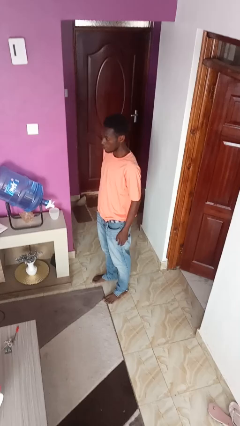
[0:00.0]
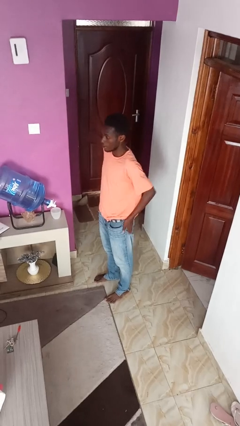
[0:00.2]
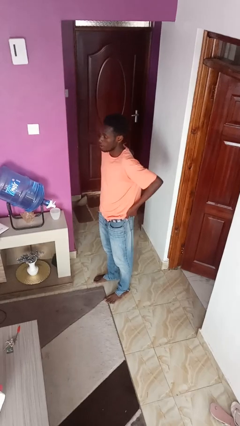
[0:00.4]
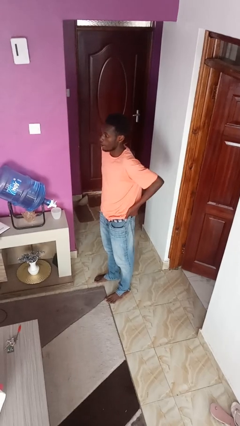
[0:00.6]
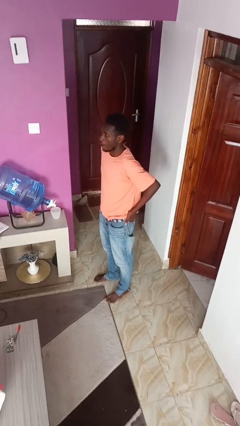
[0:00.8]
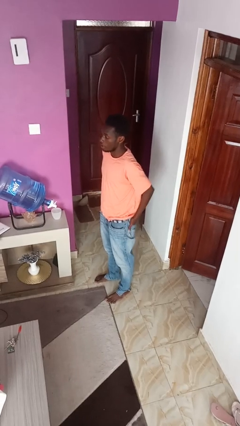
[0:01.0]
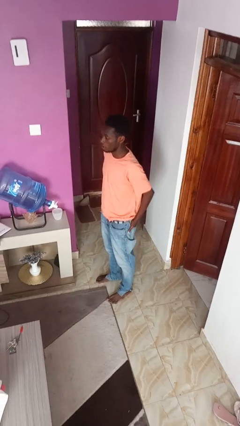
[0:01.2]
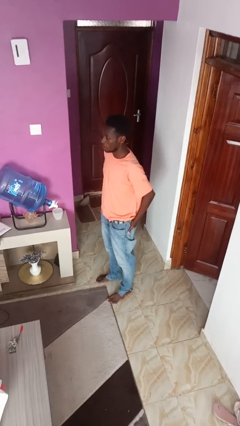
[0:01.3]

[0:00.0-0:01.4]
person puts hands in back pockets

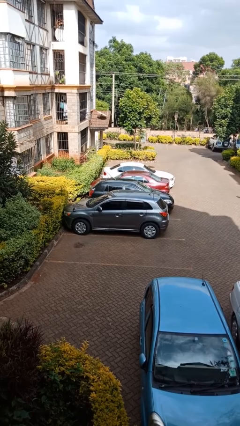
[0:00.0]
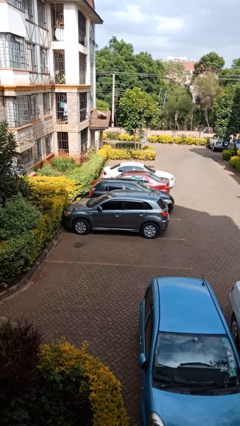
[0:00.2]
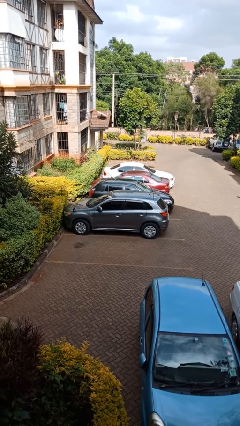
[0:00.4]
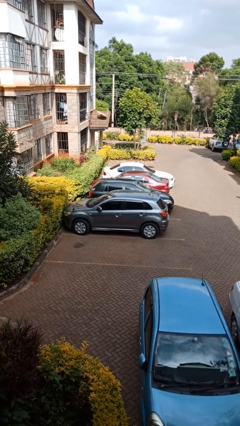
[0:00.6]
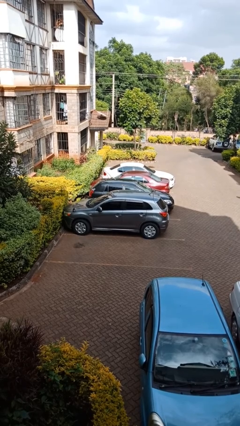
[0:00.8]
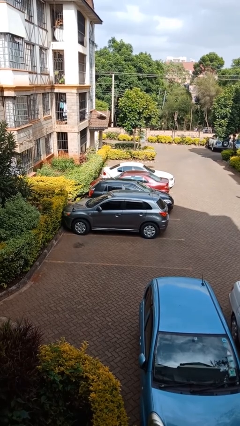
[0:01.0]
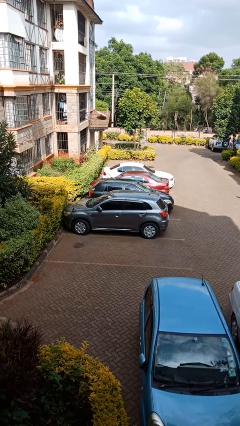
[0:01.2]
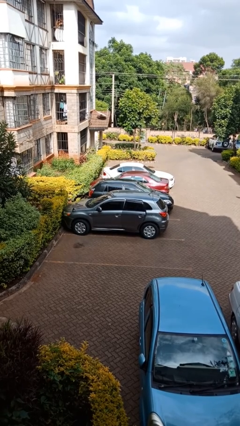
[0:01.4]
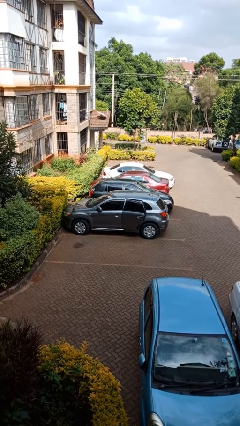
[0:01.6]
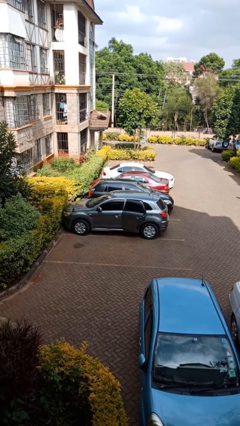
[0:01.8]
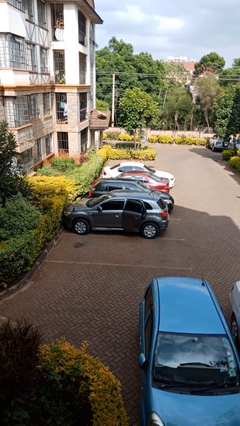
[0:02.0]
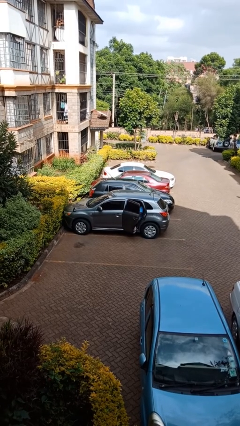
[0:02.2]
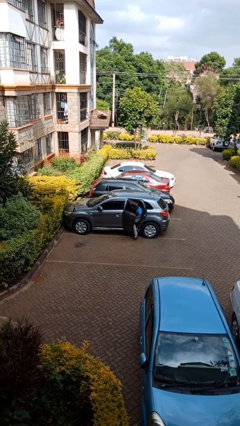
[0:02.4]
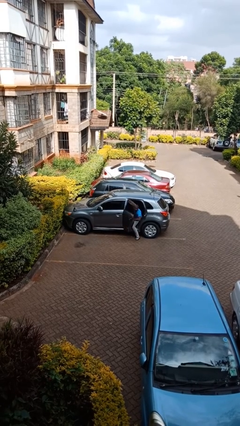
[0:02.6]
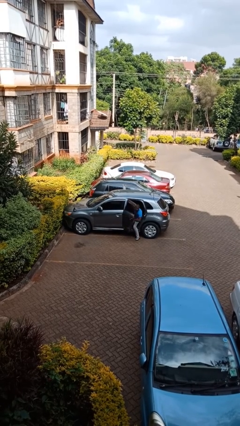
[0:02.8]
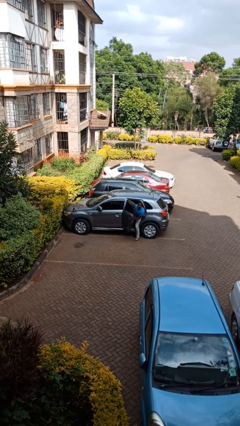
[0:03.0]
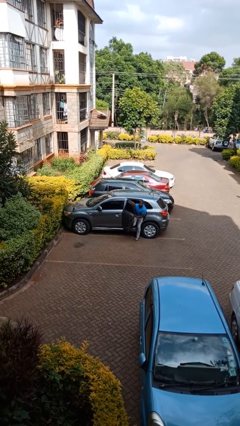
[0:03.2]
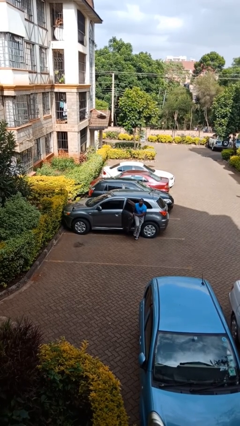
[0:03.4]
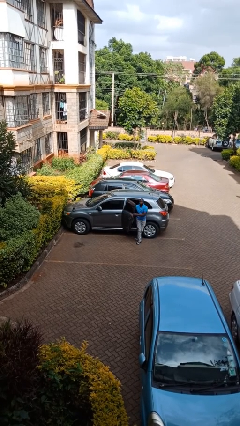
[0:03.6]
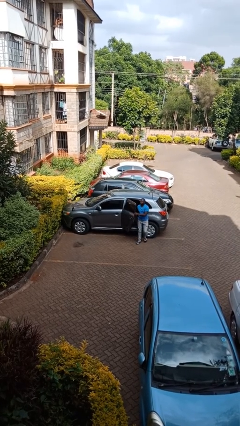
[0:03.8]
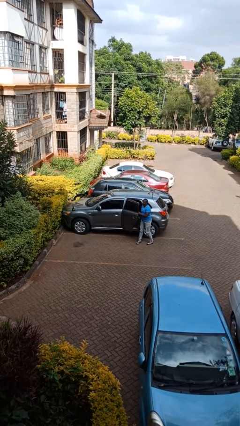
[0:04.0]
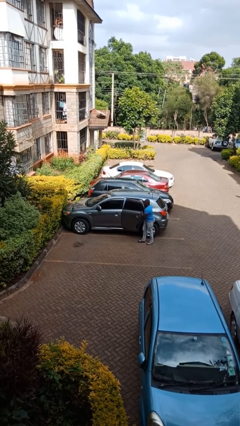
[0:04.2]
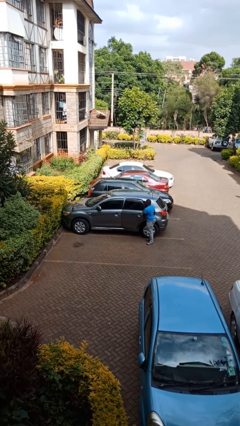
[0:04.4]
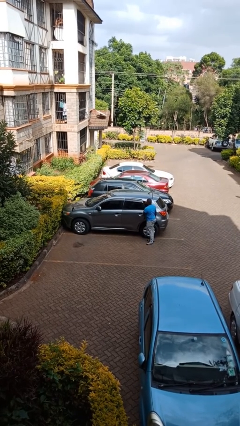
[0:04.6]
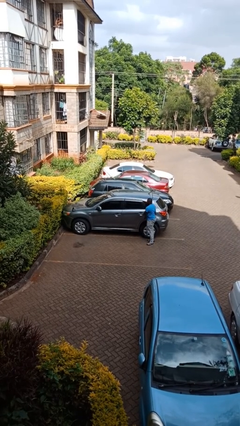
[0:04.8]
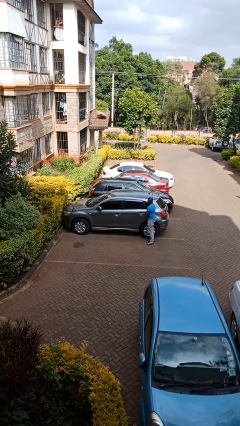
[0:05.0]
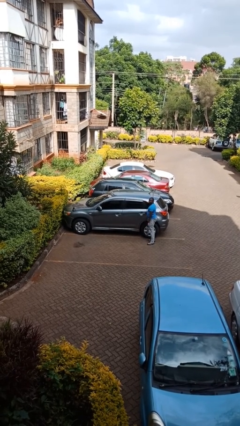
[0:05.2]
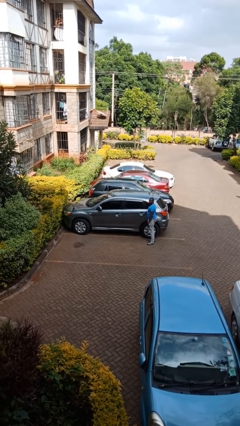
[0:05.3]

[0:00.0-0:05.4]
car drops off person

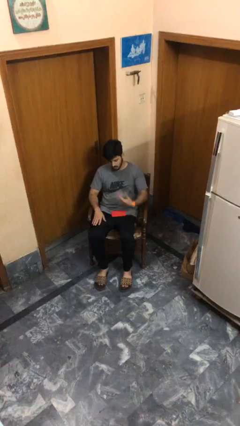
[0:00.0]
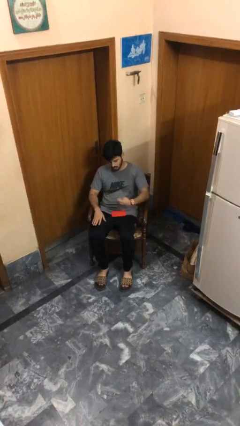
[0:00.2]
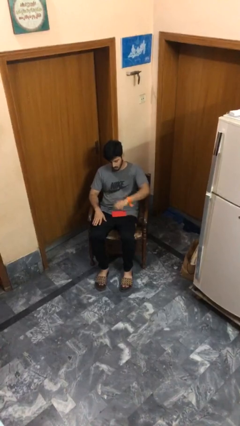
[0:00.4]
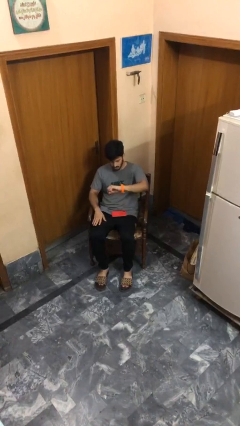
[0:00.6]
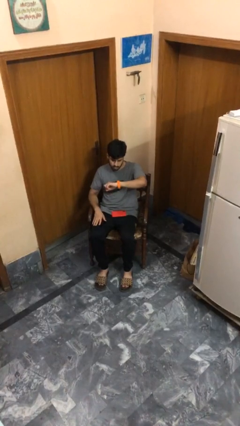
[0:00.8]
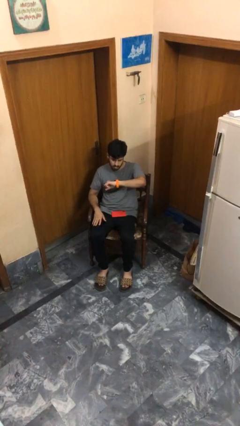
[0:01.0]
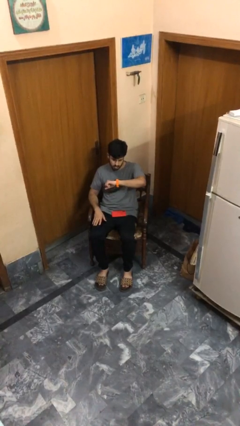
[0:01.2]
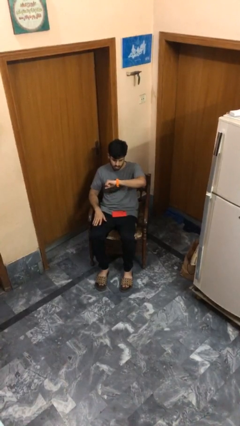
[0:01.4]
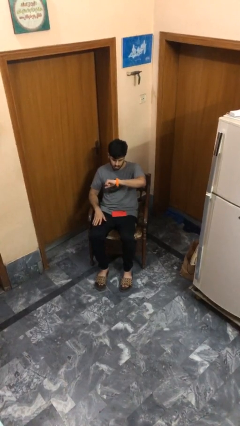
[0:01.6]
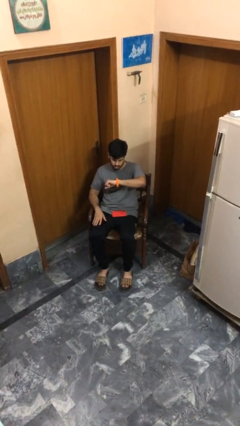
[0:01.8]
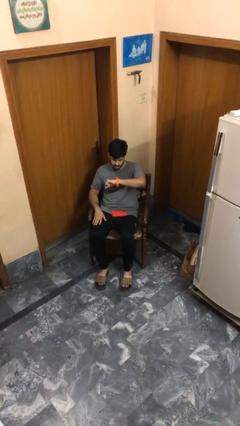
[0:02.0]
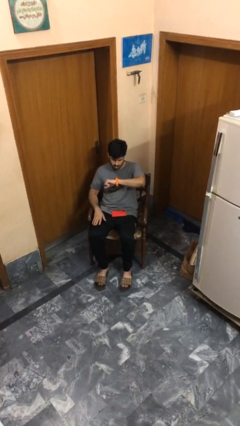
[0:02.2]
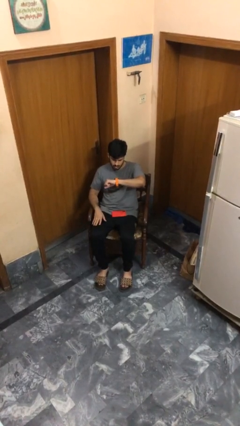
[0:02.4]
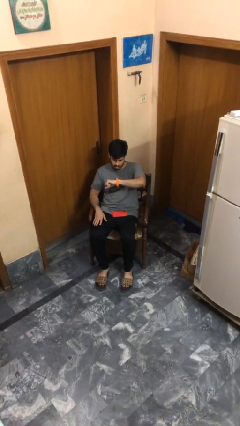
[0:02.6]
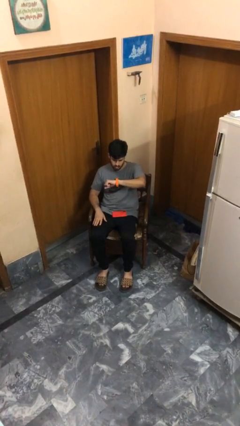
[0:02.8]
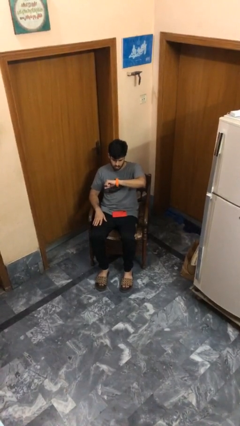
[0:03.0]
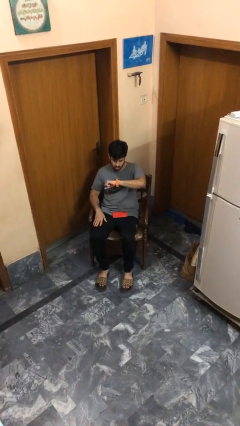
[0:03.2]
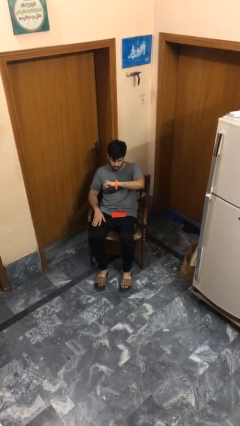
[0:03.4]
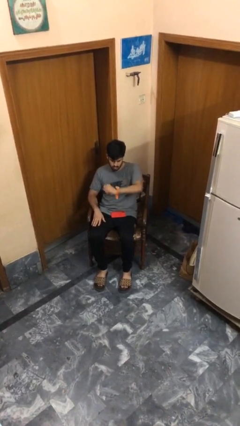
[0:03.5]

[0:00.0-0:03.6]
person looks at wristwatch

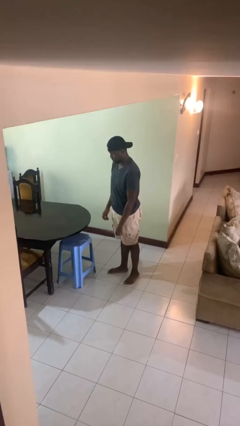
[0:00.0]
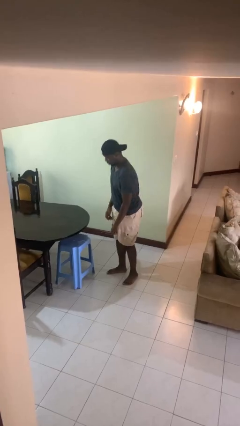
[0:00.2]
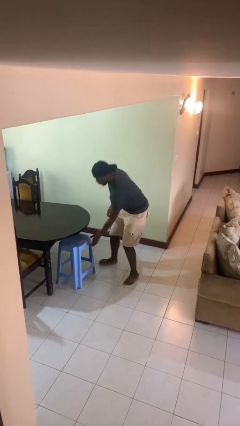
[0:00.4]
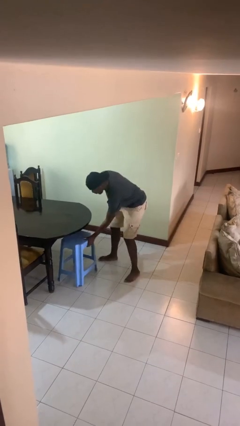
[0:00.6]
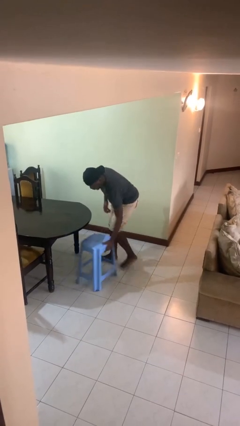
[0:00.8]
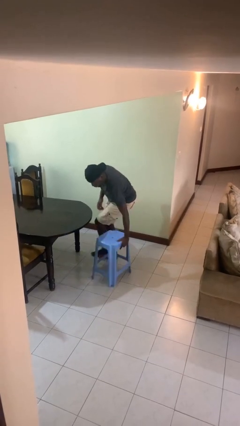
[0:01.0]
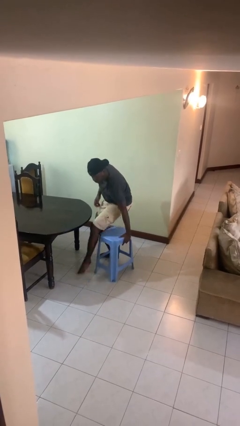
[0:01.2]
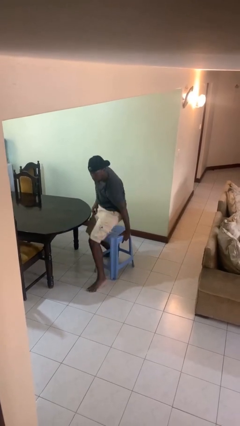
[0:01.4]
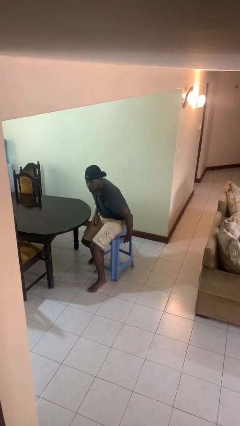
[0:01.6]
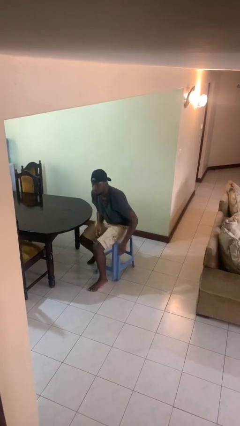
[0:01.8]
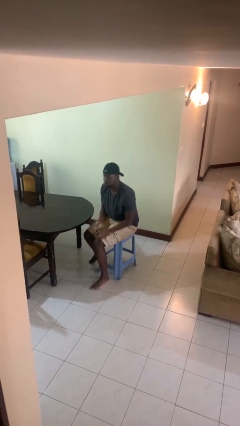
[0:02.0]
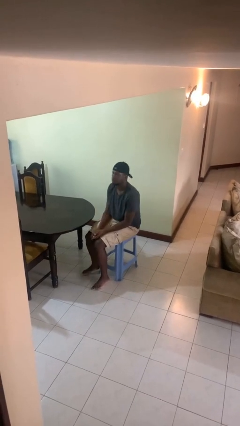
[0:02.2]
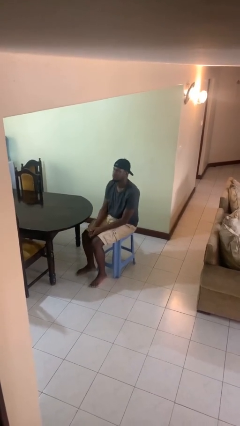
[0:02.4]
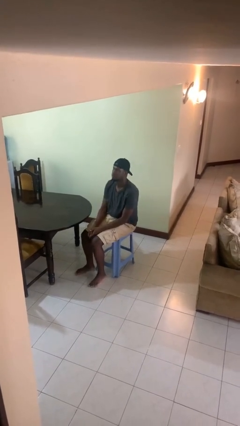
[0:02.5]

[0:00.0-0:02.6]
person sits down

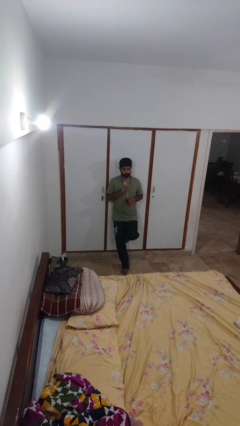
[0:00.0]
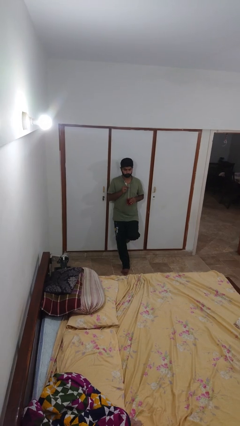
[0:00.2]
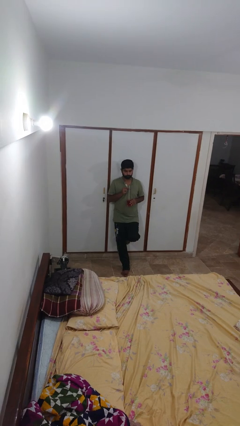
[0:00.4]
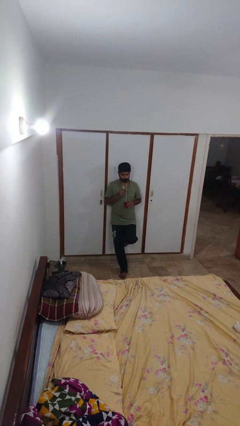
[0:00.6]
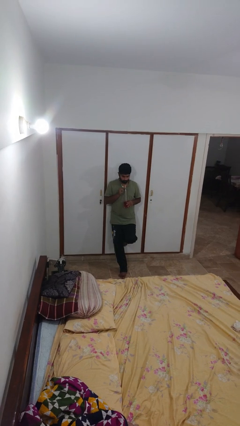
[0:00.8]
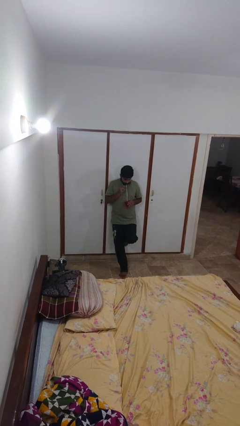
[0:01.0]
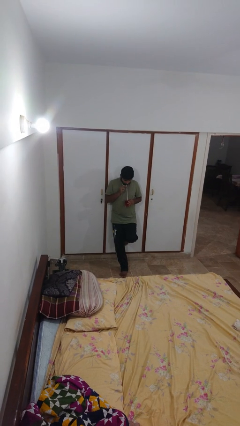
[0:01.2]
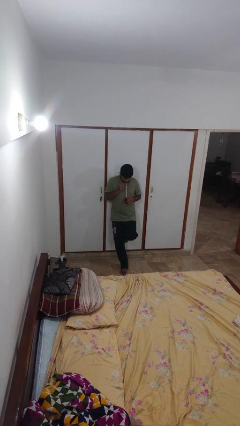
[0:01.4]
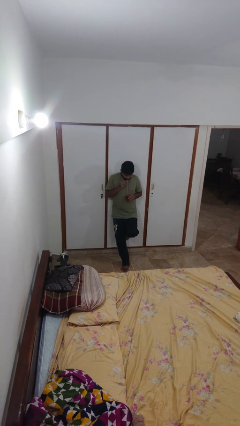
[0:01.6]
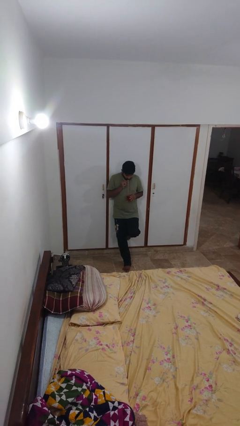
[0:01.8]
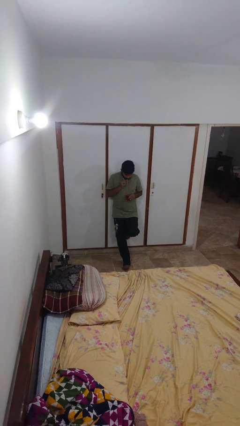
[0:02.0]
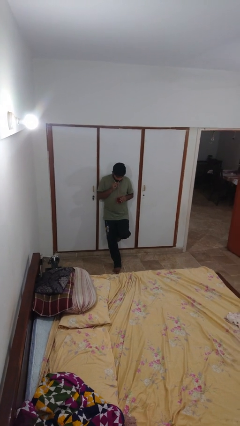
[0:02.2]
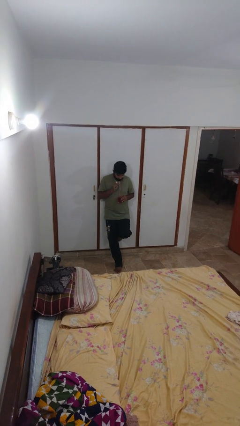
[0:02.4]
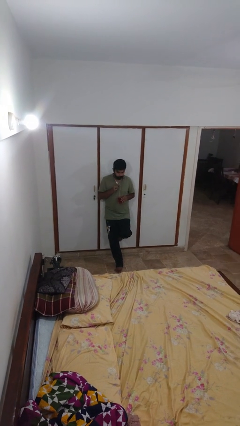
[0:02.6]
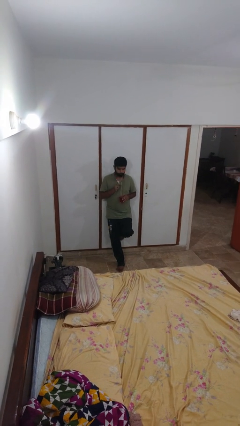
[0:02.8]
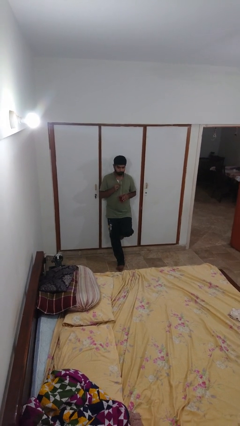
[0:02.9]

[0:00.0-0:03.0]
person drinks from straw

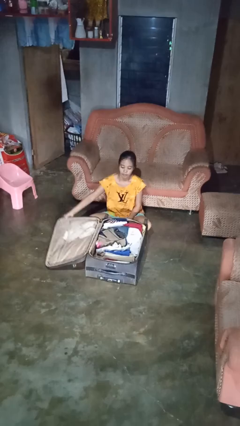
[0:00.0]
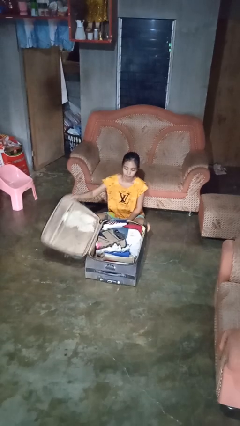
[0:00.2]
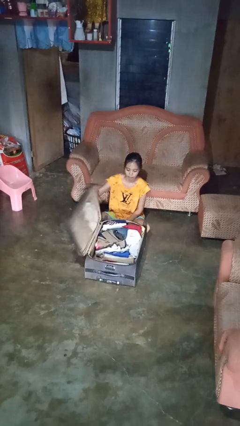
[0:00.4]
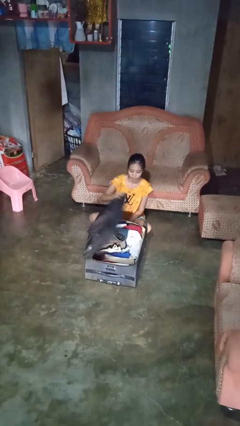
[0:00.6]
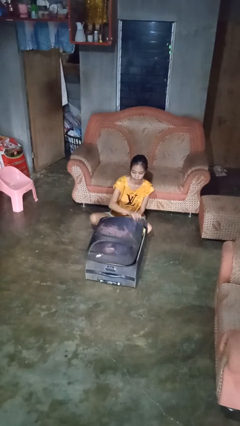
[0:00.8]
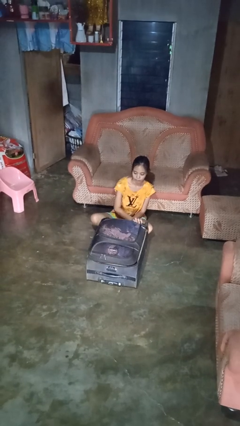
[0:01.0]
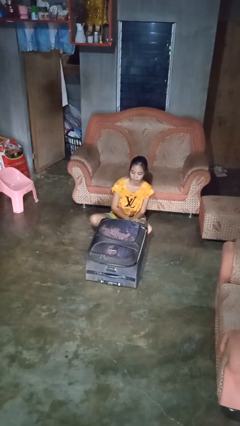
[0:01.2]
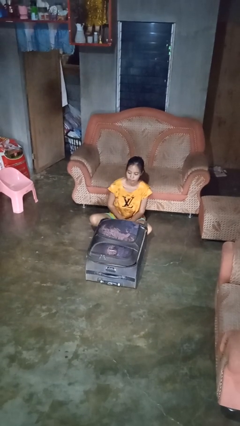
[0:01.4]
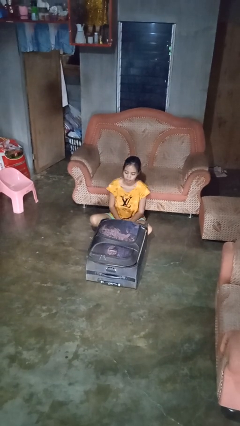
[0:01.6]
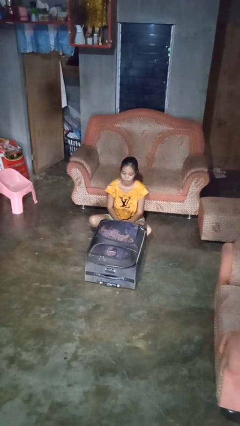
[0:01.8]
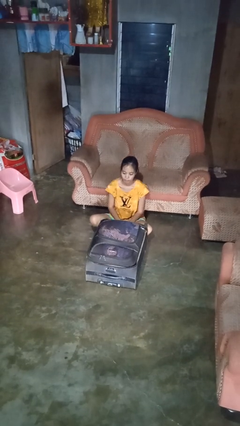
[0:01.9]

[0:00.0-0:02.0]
person closes suitcase

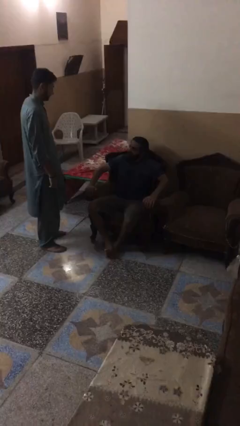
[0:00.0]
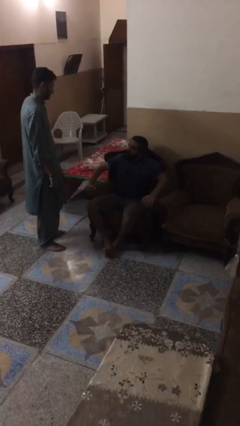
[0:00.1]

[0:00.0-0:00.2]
person embraces person
